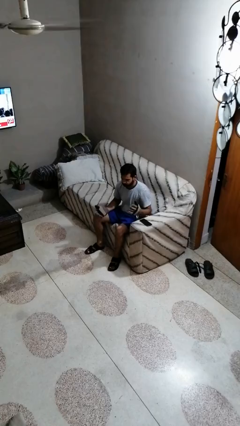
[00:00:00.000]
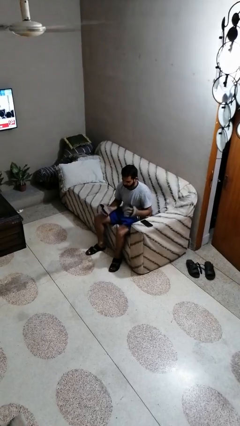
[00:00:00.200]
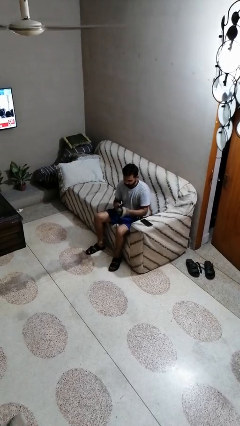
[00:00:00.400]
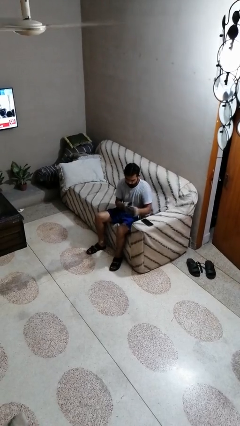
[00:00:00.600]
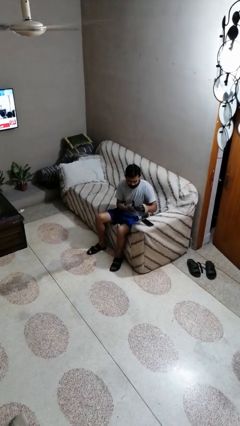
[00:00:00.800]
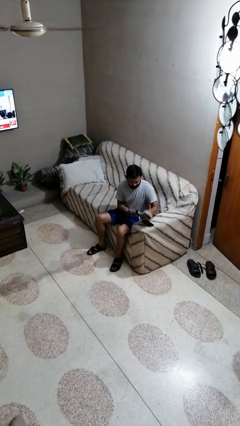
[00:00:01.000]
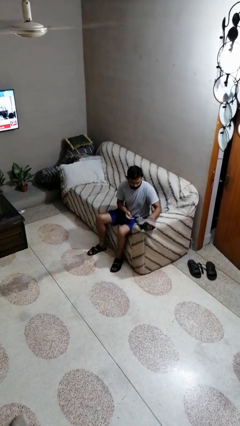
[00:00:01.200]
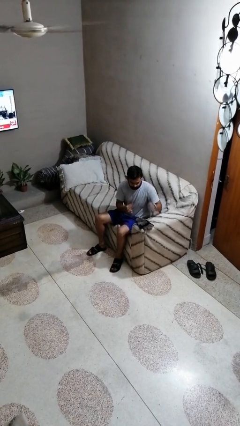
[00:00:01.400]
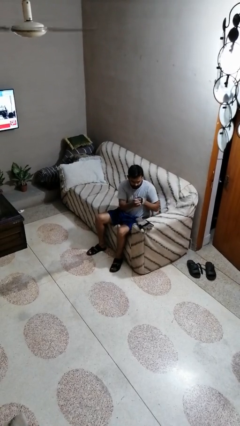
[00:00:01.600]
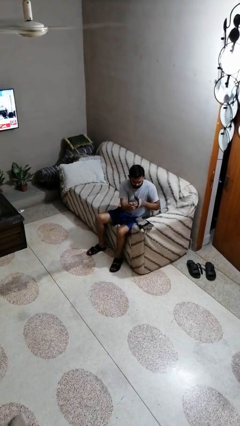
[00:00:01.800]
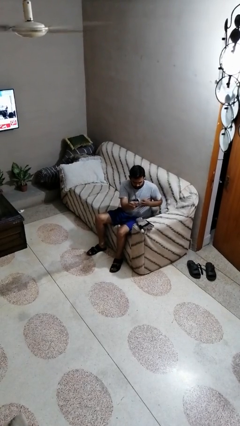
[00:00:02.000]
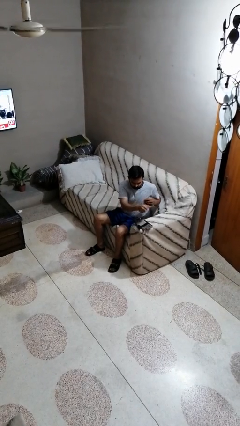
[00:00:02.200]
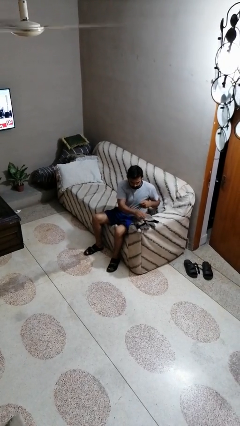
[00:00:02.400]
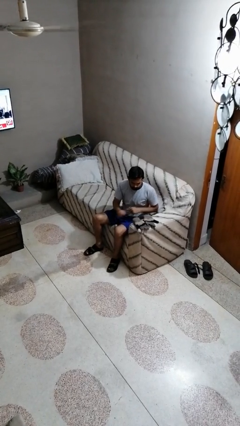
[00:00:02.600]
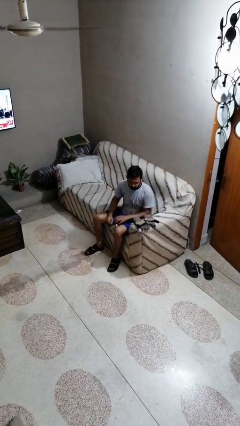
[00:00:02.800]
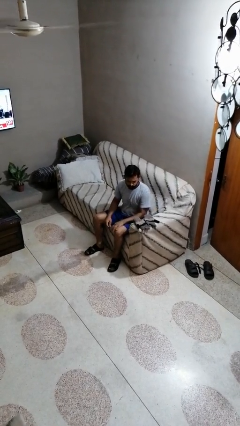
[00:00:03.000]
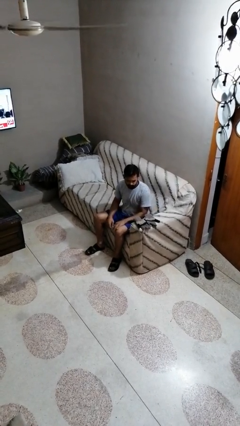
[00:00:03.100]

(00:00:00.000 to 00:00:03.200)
person takes off gloves

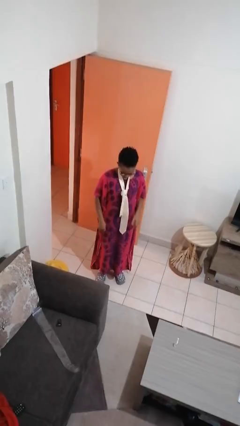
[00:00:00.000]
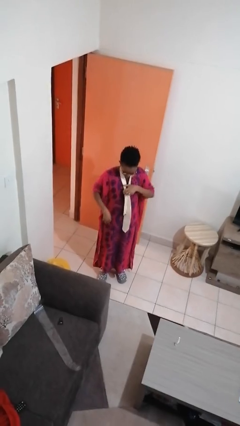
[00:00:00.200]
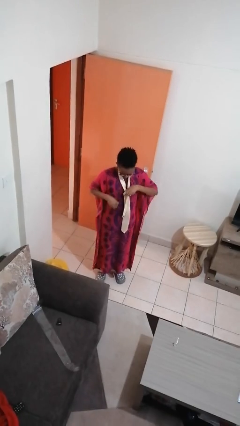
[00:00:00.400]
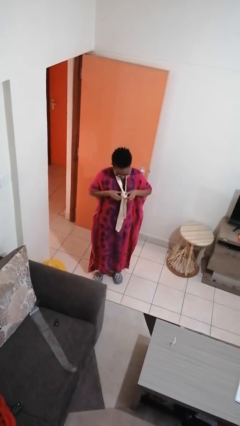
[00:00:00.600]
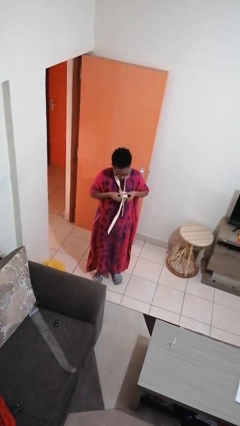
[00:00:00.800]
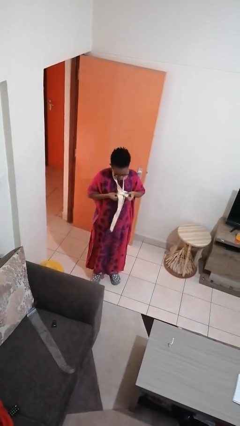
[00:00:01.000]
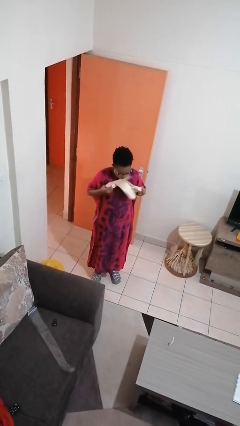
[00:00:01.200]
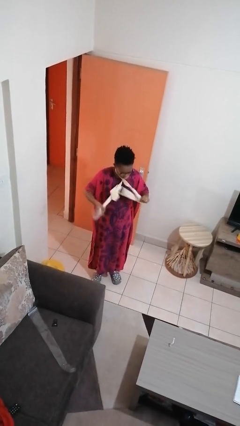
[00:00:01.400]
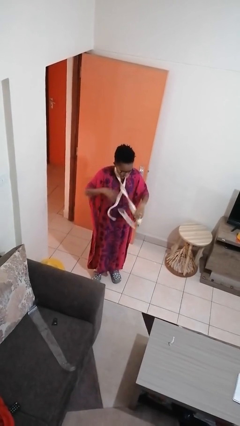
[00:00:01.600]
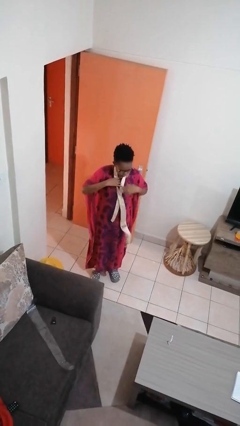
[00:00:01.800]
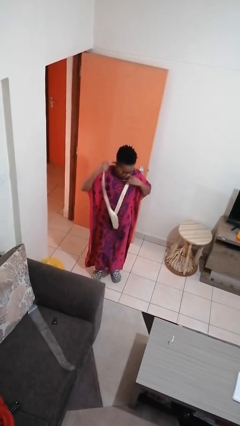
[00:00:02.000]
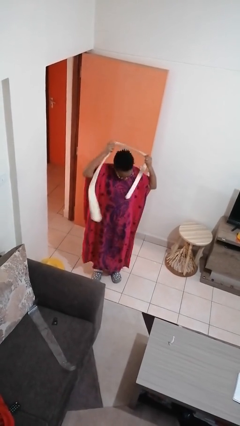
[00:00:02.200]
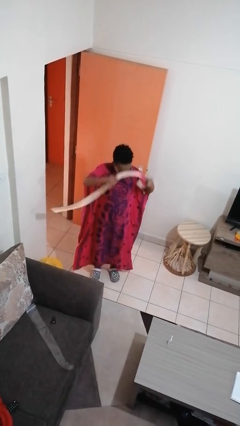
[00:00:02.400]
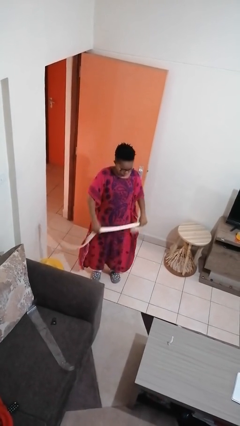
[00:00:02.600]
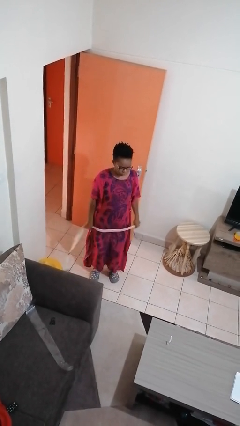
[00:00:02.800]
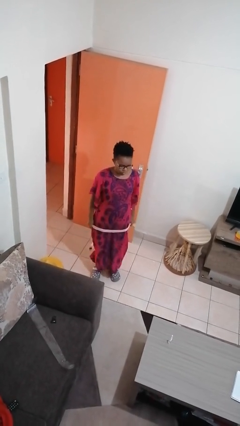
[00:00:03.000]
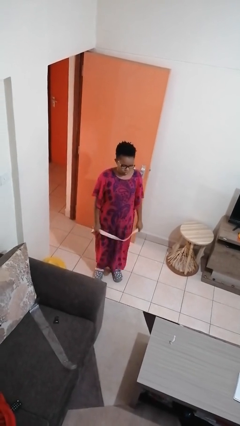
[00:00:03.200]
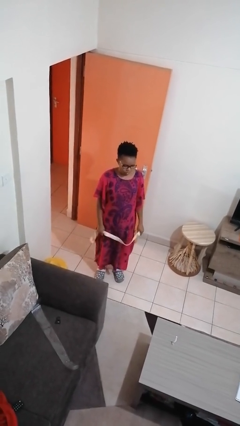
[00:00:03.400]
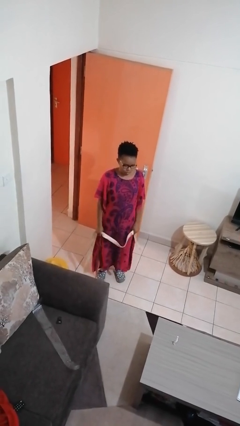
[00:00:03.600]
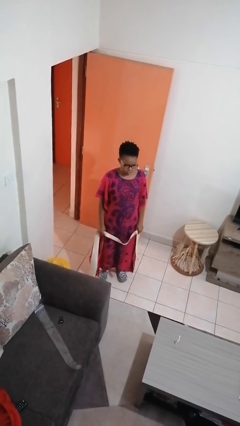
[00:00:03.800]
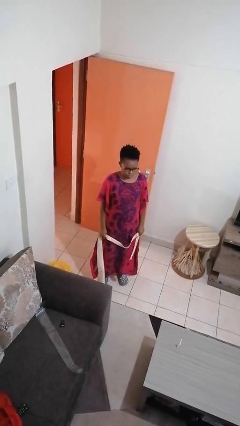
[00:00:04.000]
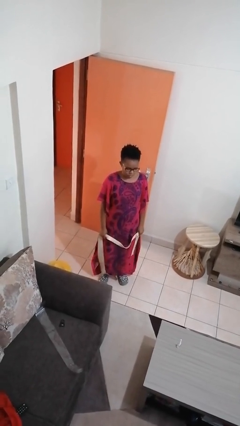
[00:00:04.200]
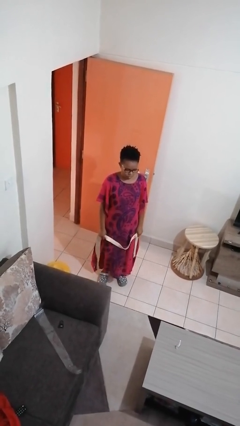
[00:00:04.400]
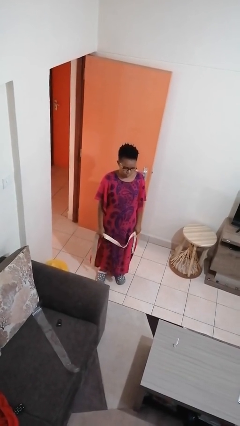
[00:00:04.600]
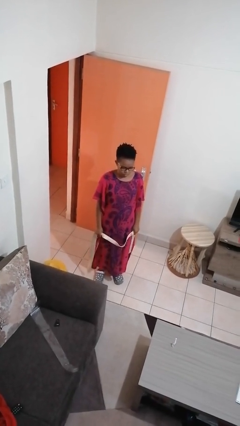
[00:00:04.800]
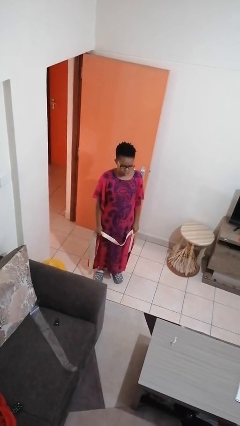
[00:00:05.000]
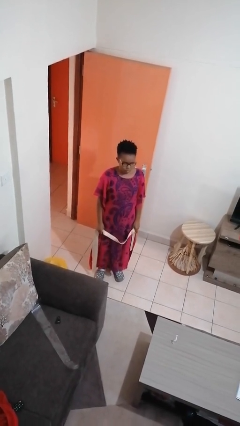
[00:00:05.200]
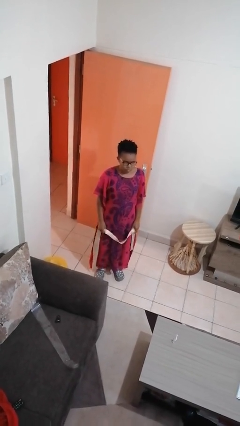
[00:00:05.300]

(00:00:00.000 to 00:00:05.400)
person takes off necktie

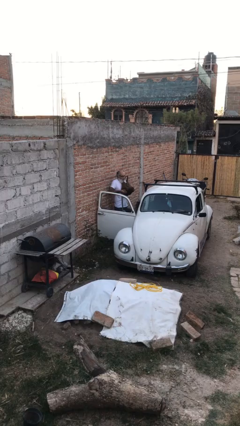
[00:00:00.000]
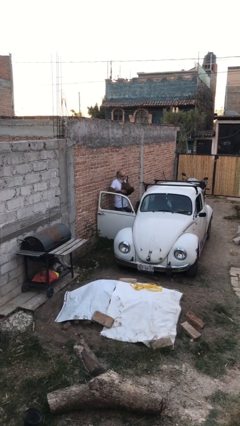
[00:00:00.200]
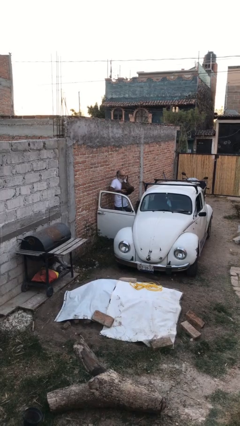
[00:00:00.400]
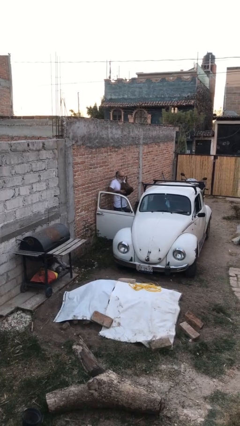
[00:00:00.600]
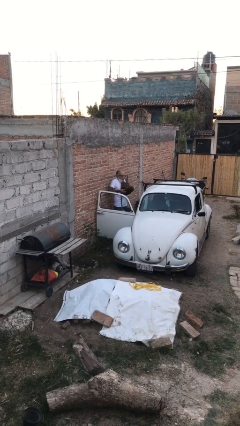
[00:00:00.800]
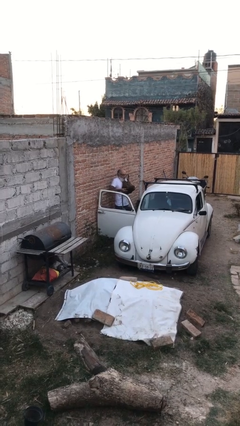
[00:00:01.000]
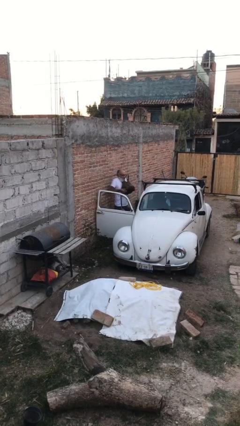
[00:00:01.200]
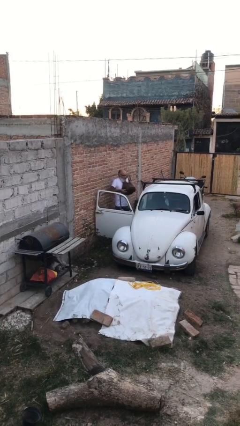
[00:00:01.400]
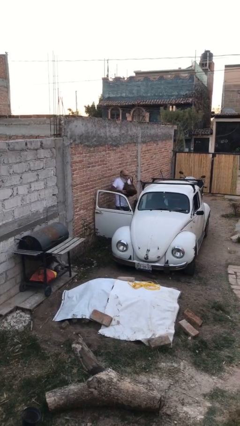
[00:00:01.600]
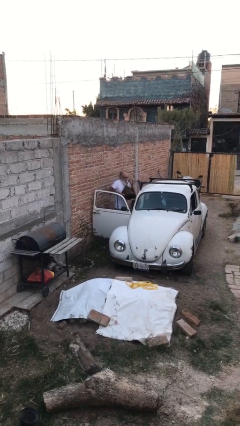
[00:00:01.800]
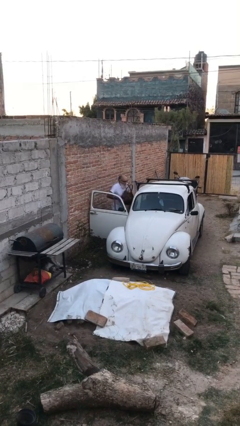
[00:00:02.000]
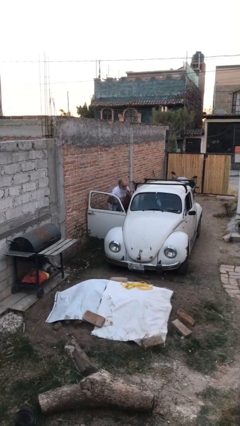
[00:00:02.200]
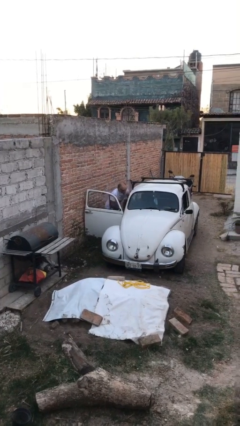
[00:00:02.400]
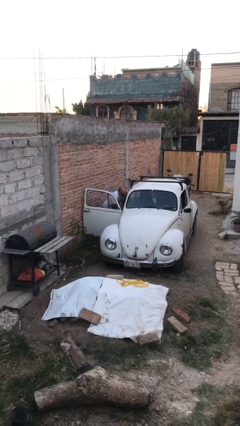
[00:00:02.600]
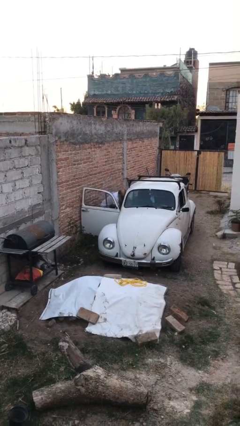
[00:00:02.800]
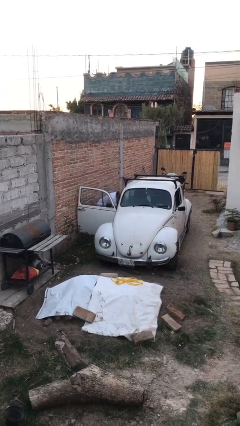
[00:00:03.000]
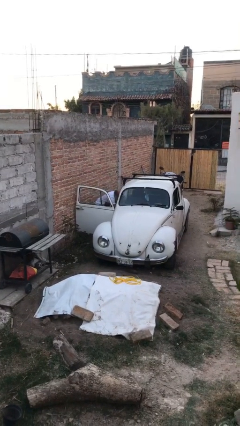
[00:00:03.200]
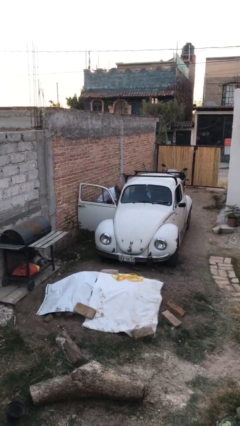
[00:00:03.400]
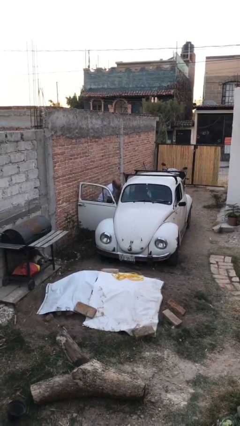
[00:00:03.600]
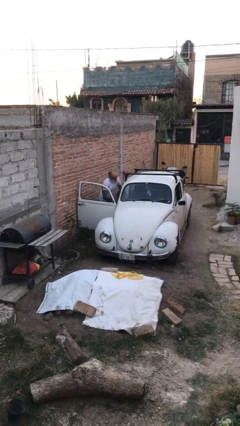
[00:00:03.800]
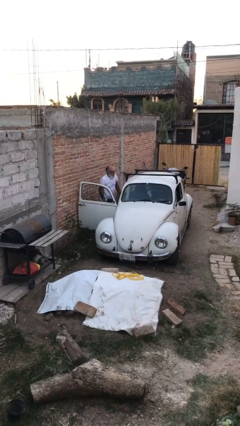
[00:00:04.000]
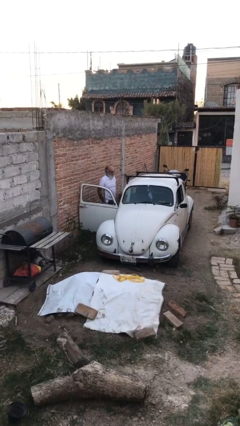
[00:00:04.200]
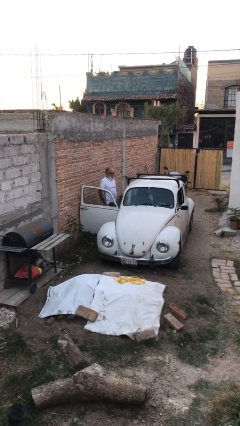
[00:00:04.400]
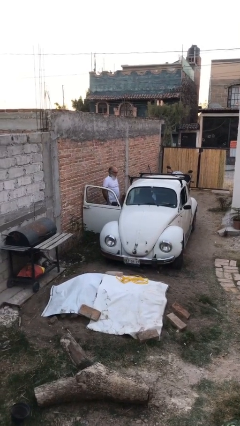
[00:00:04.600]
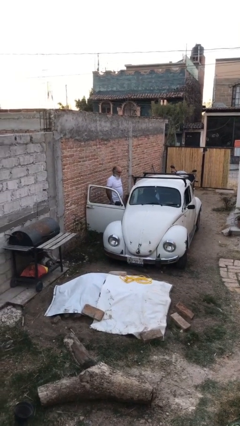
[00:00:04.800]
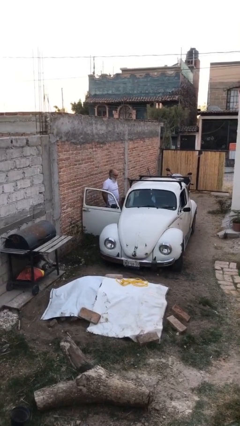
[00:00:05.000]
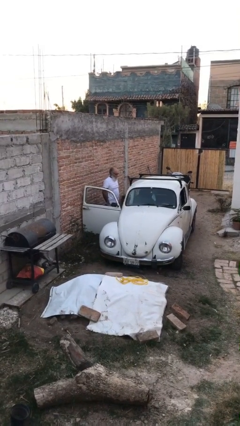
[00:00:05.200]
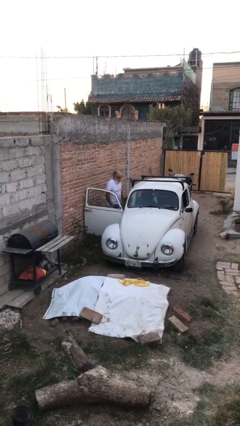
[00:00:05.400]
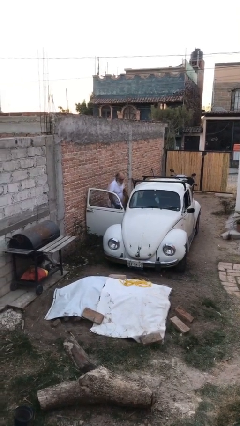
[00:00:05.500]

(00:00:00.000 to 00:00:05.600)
person loads car

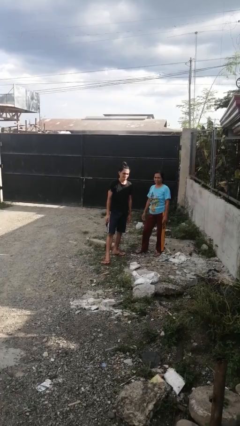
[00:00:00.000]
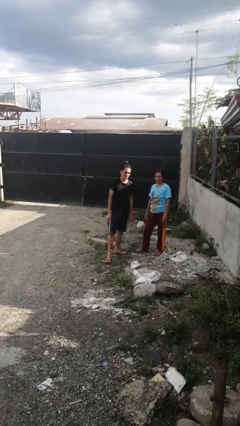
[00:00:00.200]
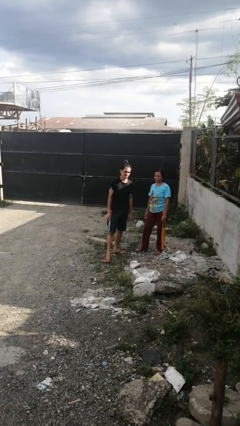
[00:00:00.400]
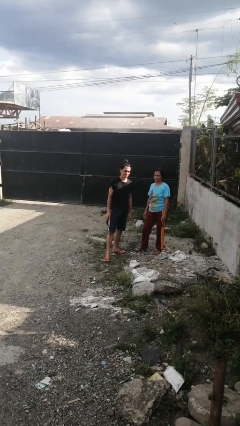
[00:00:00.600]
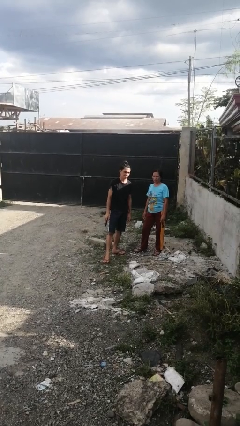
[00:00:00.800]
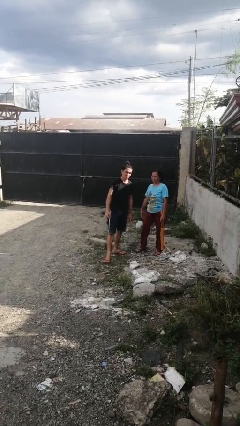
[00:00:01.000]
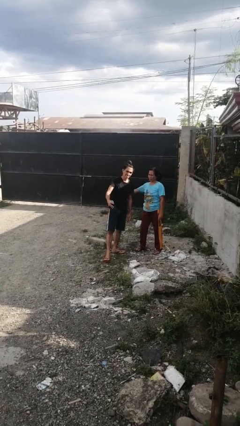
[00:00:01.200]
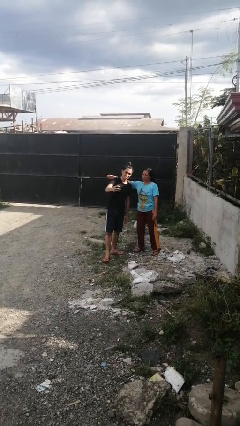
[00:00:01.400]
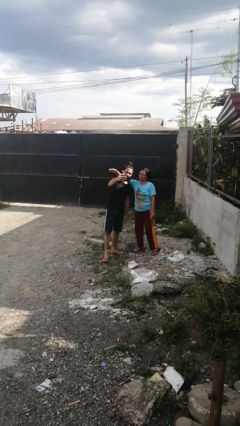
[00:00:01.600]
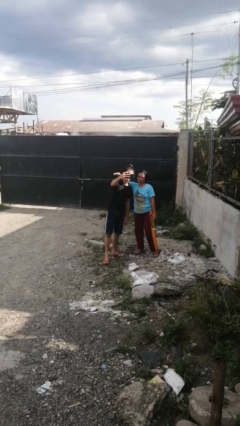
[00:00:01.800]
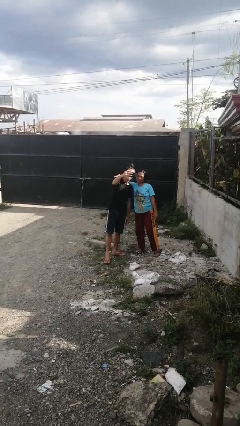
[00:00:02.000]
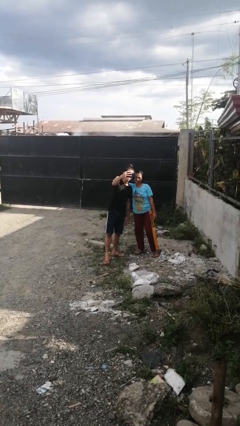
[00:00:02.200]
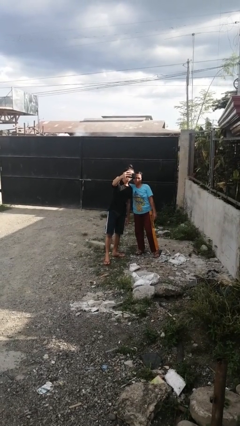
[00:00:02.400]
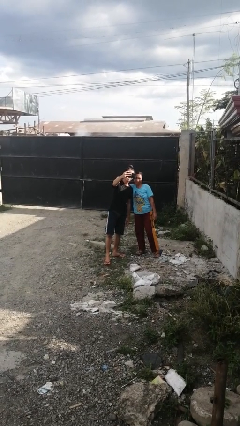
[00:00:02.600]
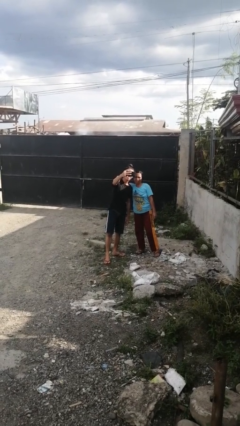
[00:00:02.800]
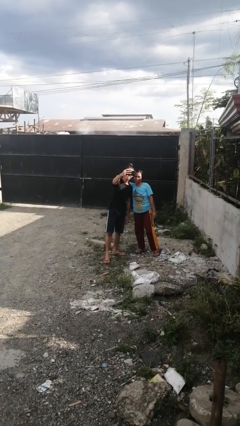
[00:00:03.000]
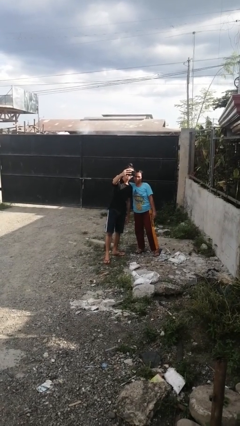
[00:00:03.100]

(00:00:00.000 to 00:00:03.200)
person takes selfie with person
